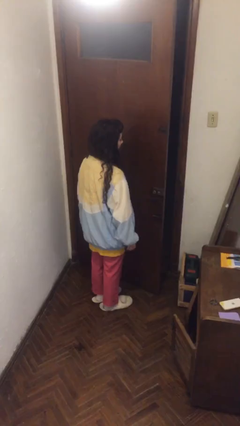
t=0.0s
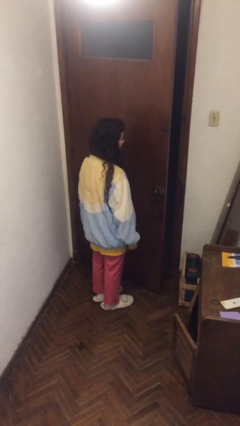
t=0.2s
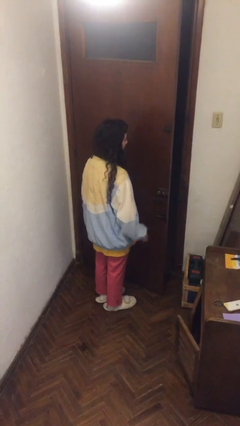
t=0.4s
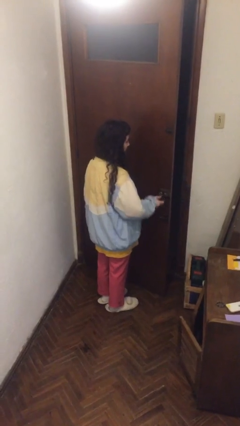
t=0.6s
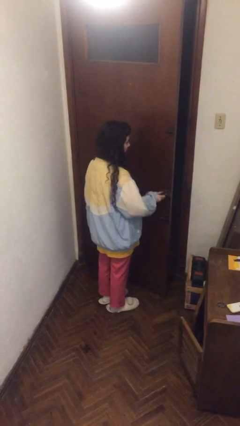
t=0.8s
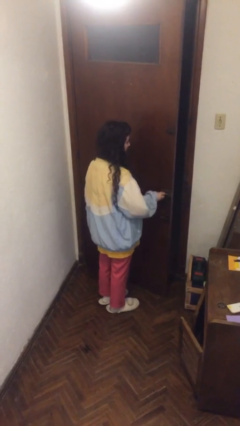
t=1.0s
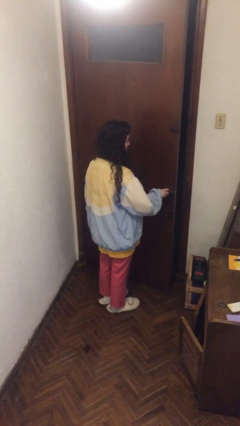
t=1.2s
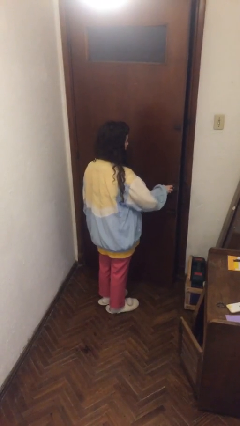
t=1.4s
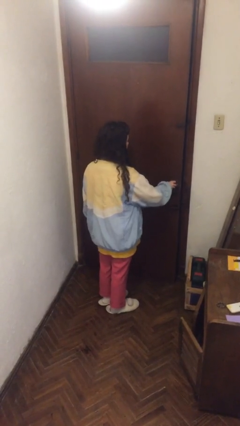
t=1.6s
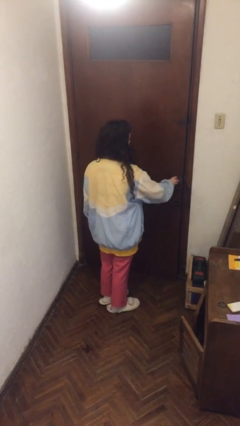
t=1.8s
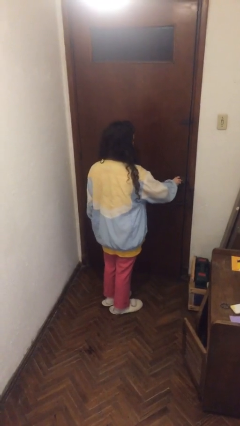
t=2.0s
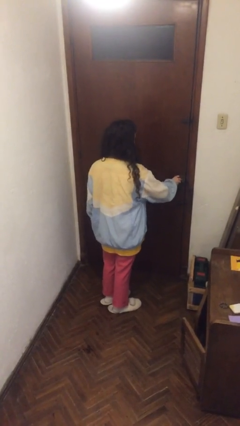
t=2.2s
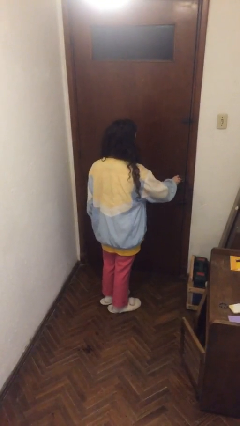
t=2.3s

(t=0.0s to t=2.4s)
person closes facility door

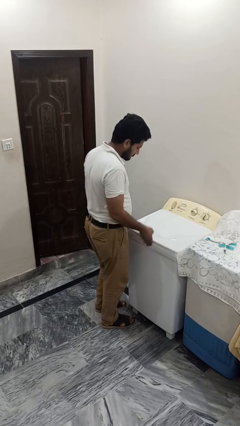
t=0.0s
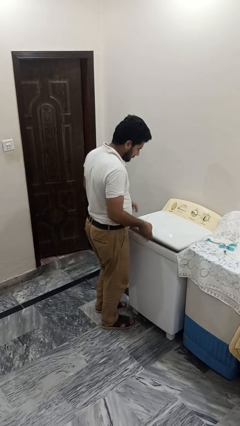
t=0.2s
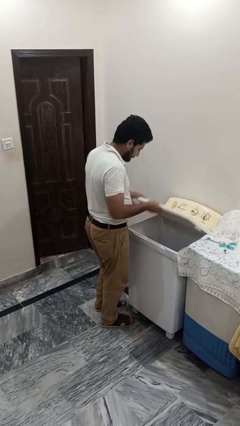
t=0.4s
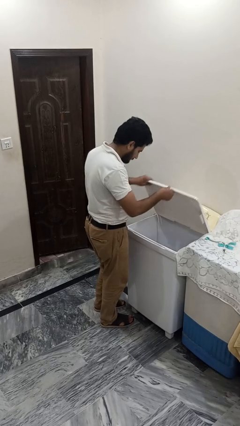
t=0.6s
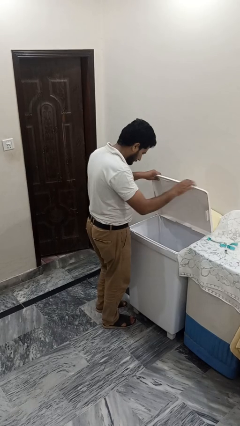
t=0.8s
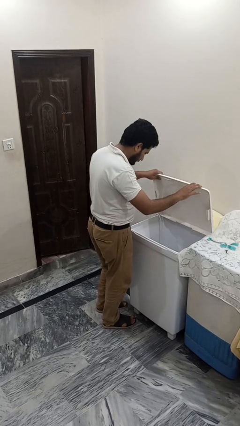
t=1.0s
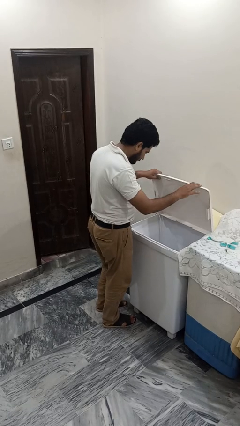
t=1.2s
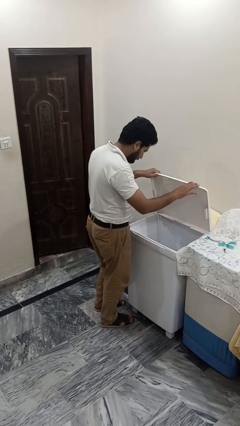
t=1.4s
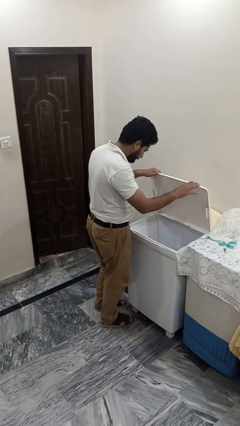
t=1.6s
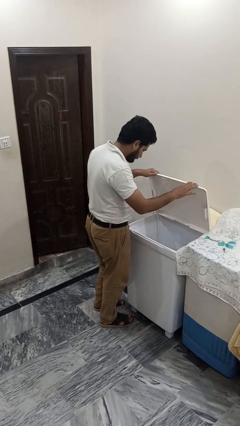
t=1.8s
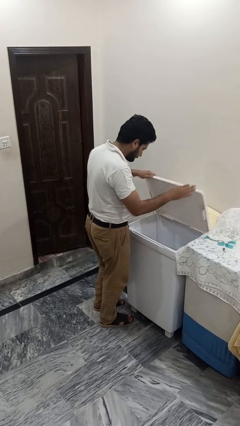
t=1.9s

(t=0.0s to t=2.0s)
person opens clothes washer

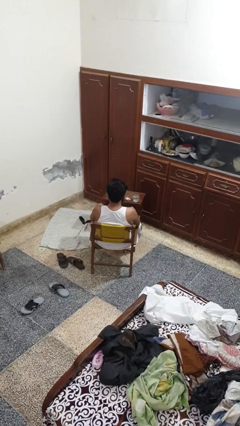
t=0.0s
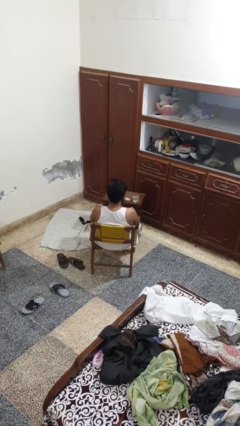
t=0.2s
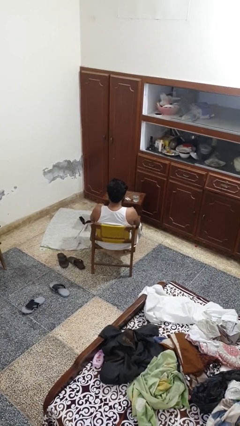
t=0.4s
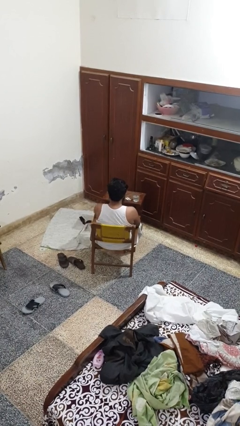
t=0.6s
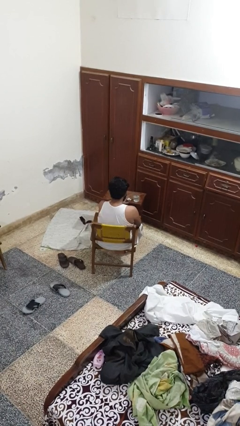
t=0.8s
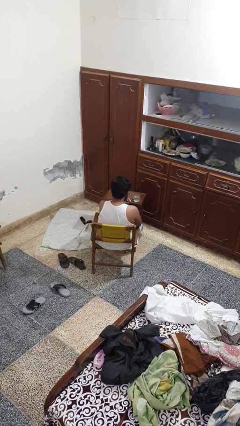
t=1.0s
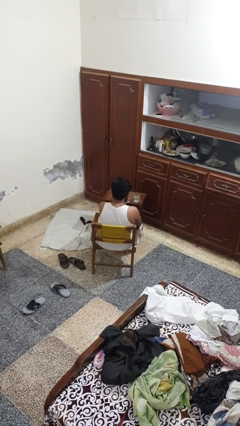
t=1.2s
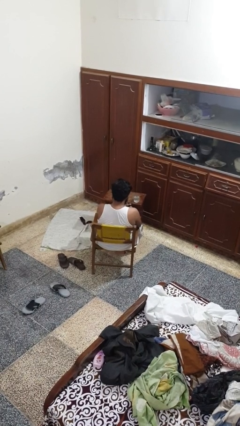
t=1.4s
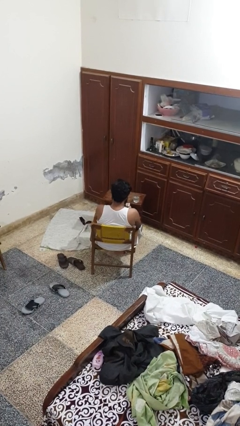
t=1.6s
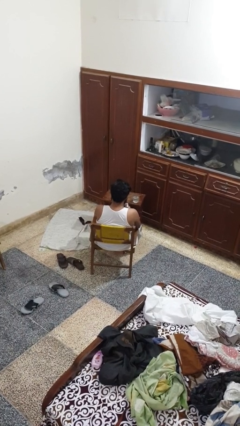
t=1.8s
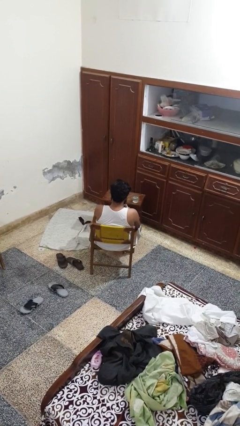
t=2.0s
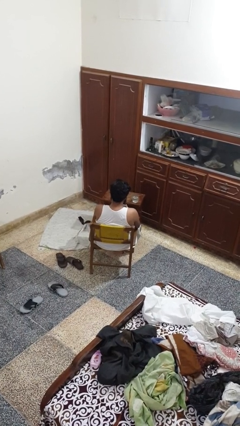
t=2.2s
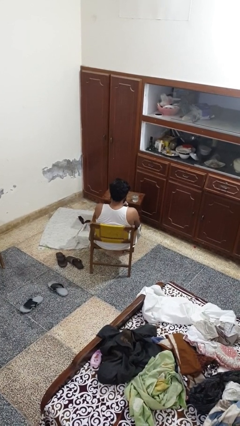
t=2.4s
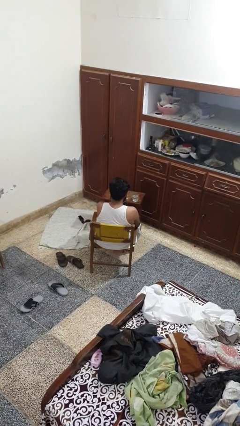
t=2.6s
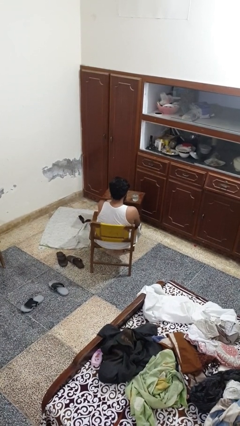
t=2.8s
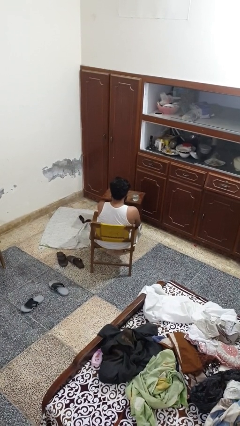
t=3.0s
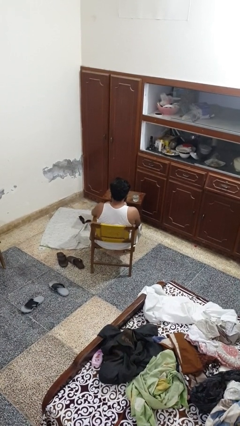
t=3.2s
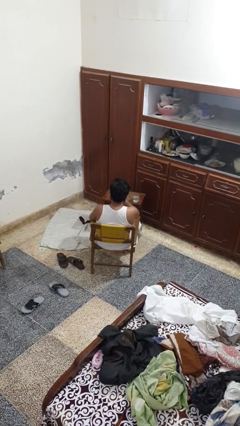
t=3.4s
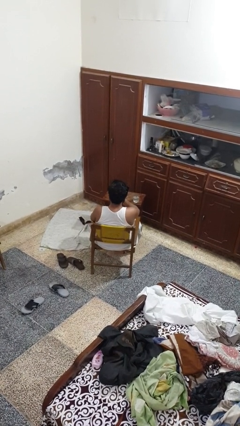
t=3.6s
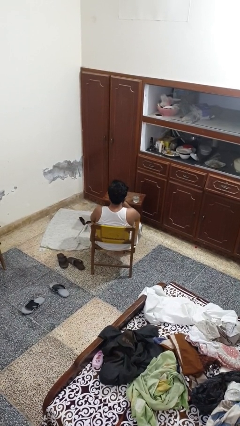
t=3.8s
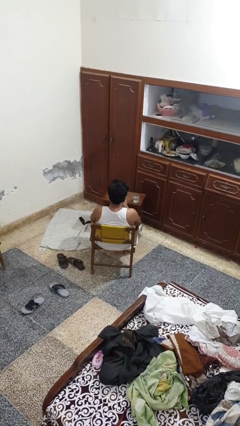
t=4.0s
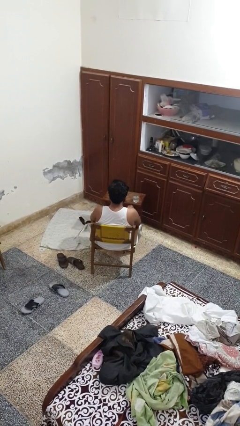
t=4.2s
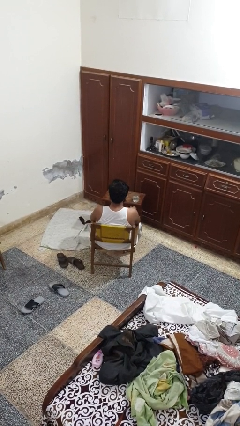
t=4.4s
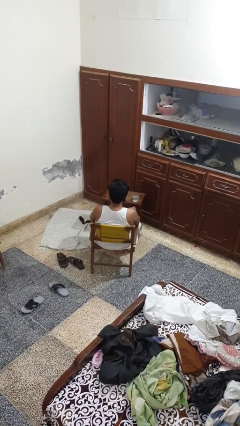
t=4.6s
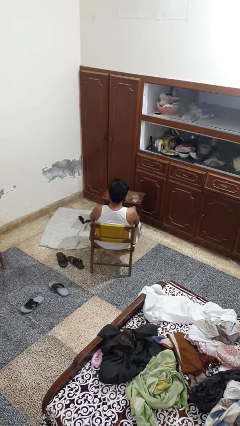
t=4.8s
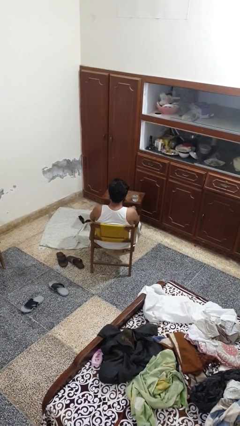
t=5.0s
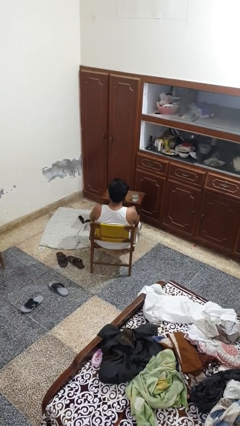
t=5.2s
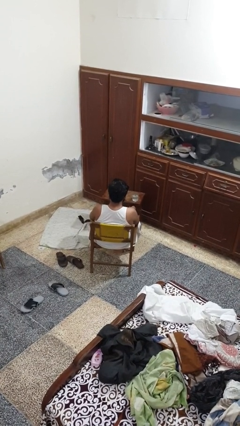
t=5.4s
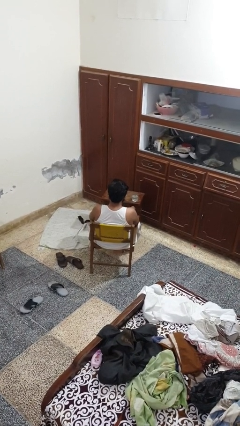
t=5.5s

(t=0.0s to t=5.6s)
person takes medicine pills

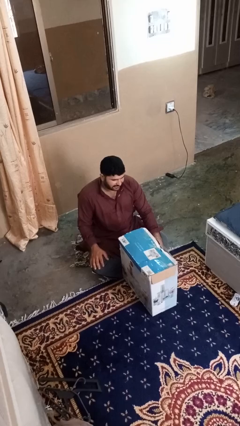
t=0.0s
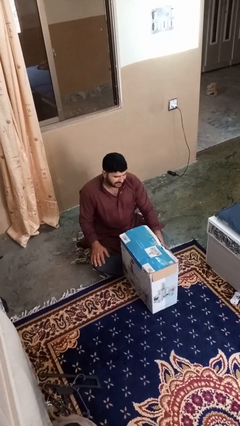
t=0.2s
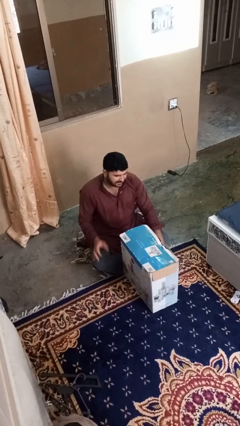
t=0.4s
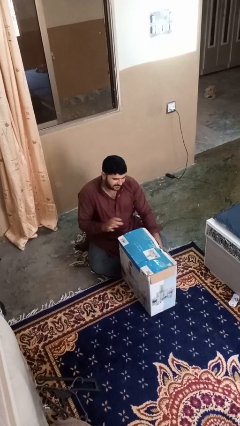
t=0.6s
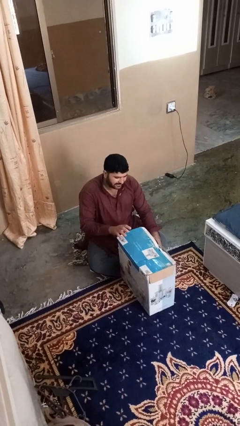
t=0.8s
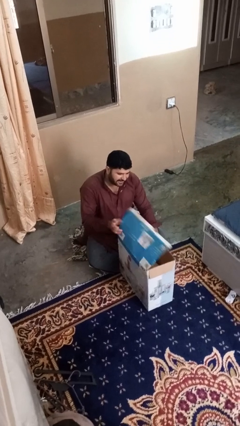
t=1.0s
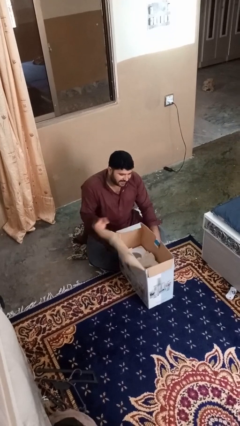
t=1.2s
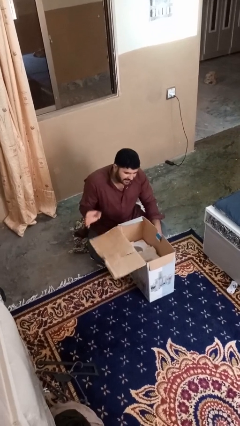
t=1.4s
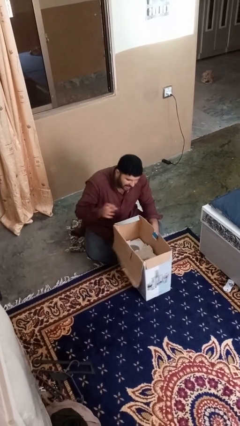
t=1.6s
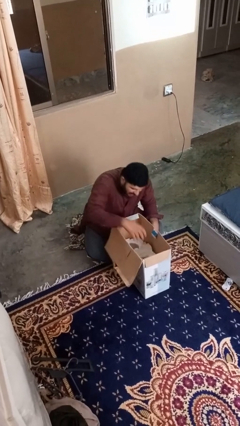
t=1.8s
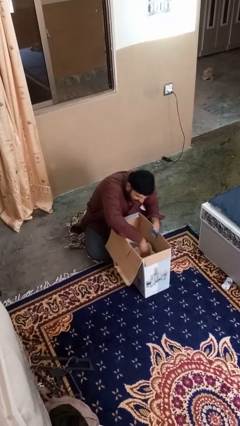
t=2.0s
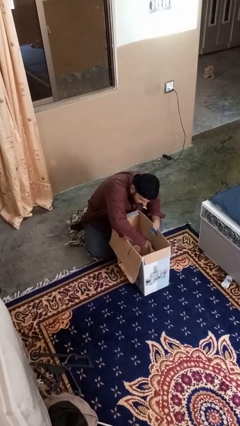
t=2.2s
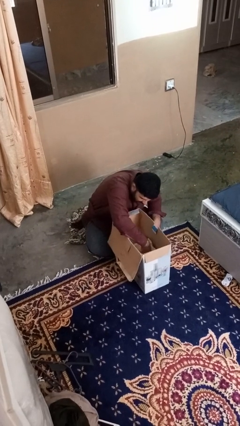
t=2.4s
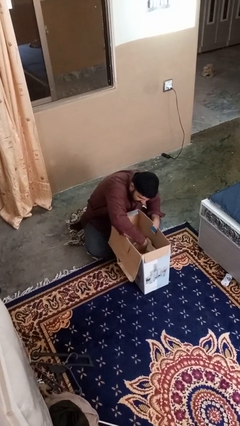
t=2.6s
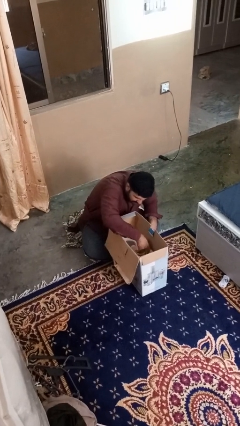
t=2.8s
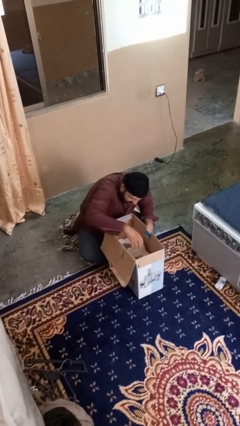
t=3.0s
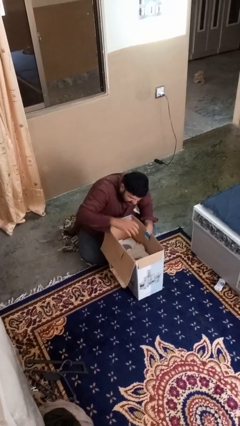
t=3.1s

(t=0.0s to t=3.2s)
person searches in box

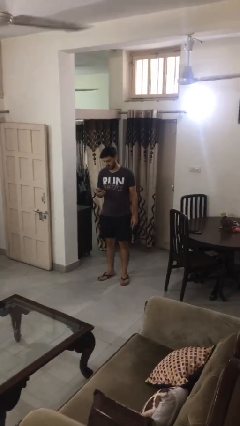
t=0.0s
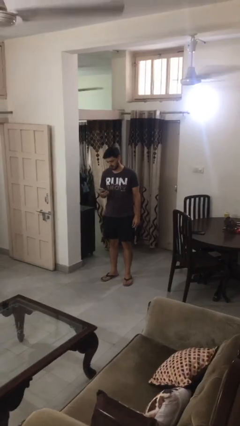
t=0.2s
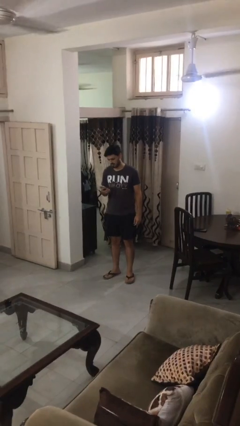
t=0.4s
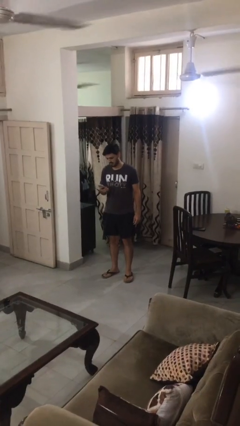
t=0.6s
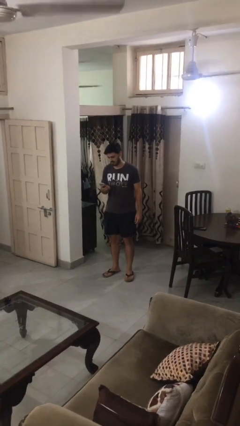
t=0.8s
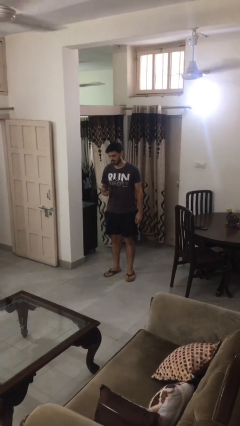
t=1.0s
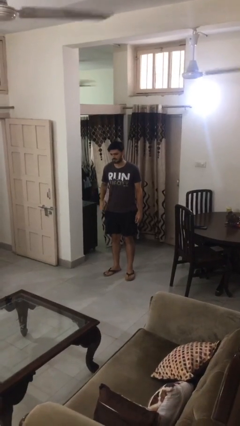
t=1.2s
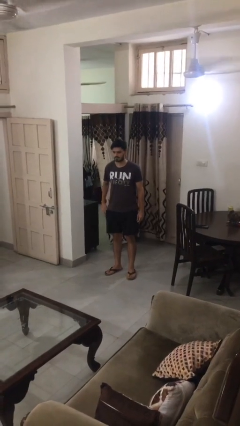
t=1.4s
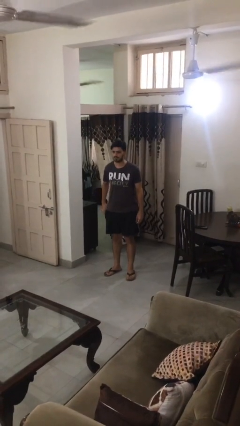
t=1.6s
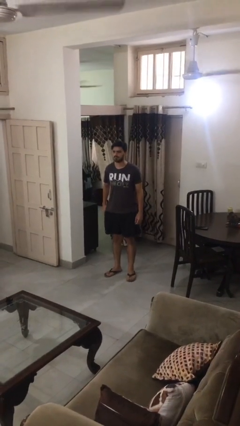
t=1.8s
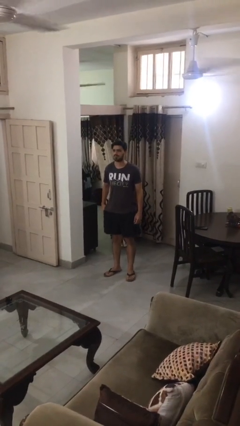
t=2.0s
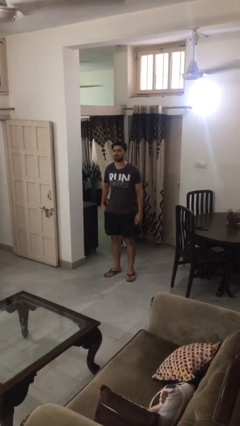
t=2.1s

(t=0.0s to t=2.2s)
person puts phone into pocket

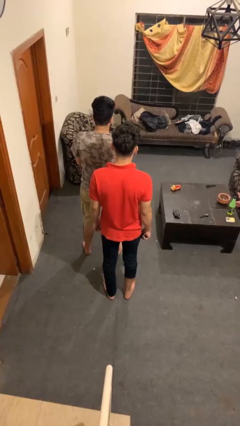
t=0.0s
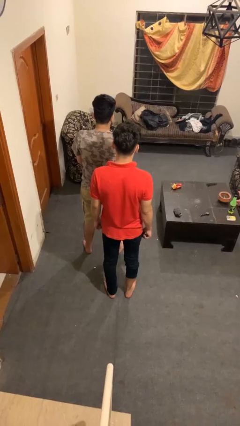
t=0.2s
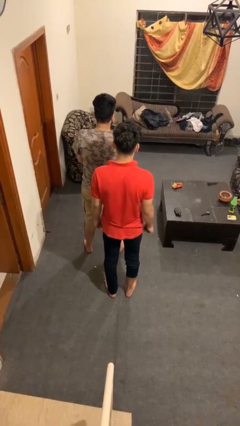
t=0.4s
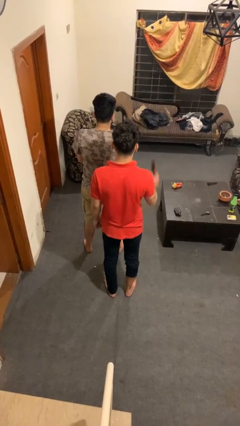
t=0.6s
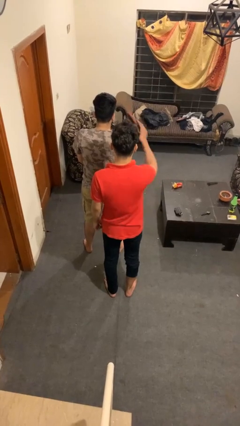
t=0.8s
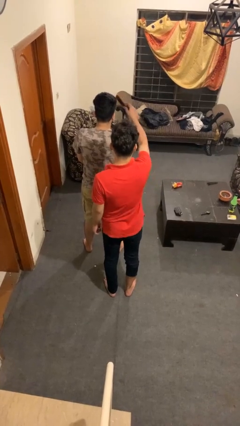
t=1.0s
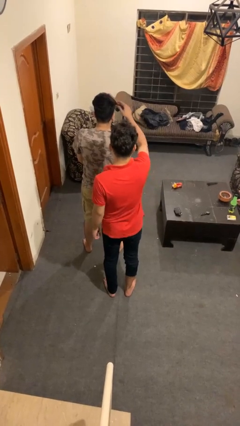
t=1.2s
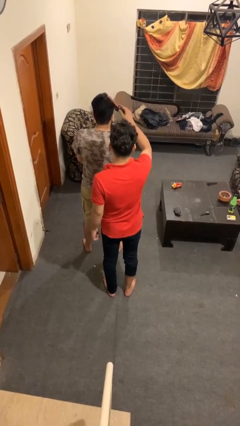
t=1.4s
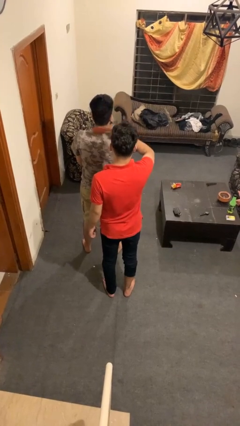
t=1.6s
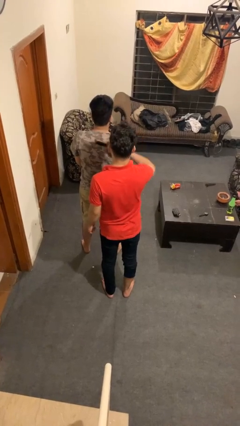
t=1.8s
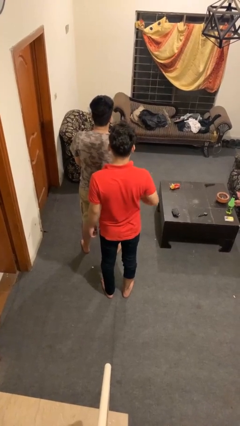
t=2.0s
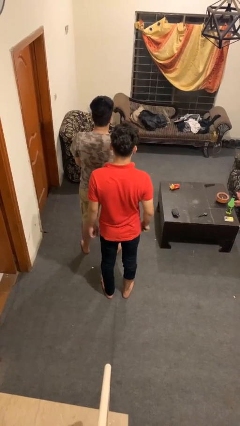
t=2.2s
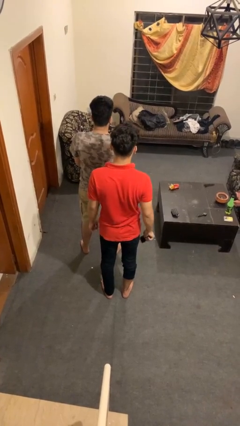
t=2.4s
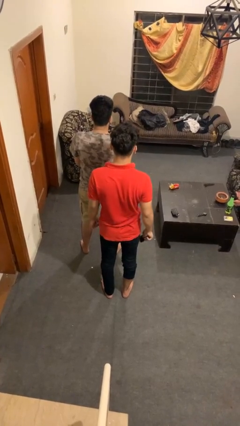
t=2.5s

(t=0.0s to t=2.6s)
person brushes hair of person
